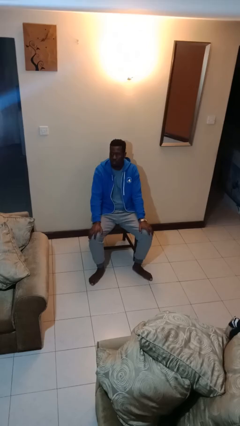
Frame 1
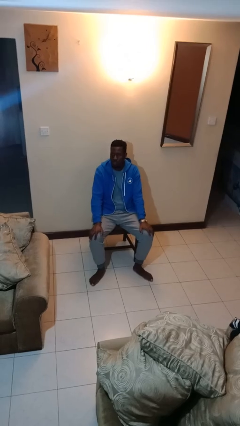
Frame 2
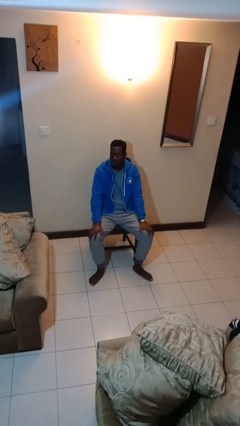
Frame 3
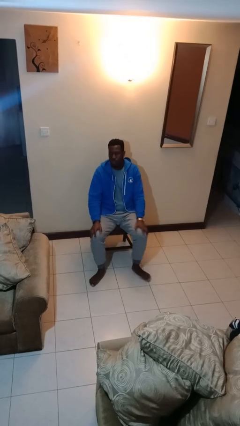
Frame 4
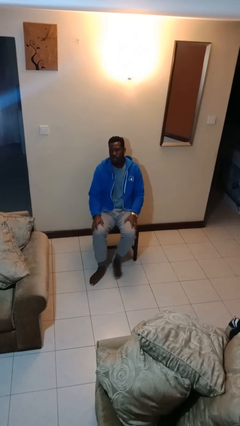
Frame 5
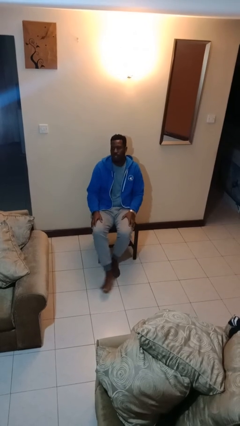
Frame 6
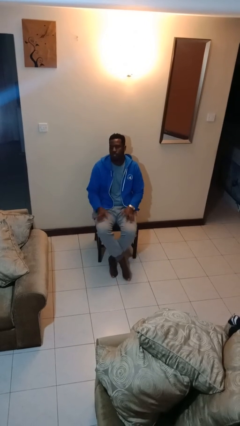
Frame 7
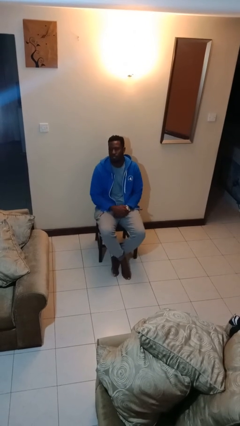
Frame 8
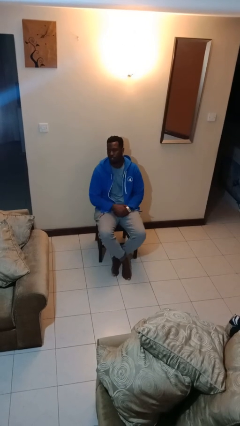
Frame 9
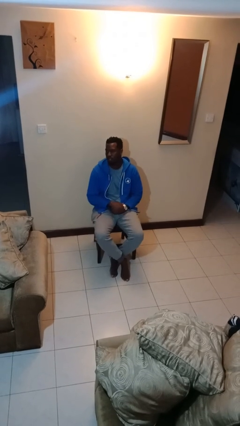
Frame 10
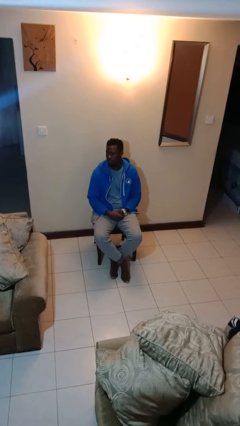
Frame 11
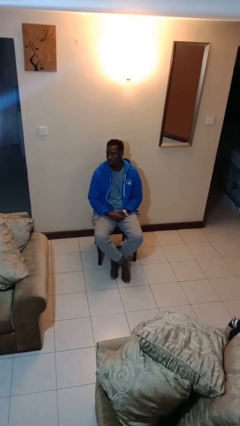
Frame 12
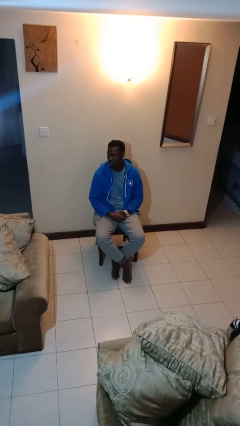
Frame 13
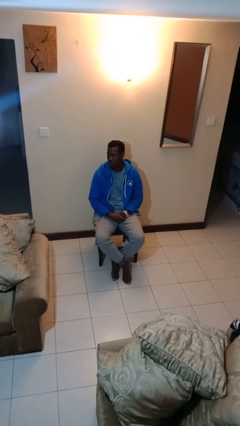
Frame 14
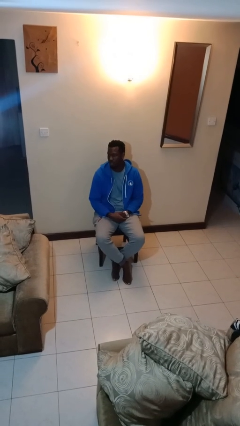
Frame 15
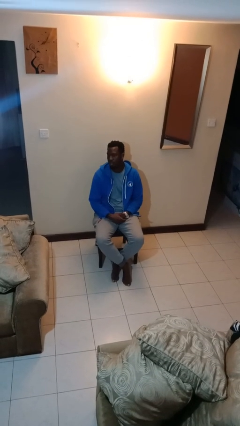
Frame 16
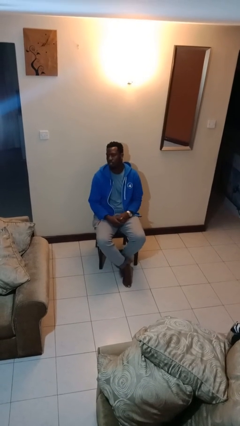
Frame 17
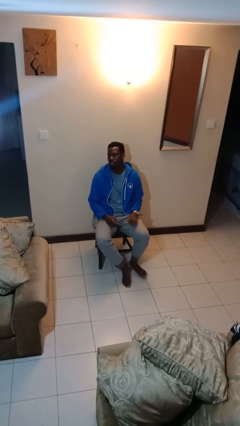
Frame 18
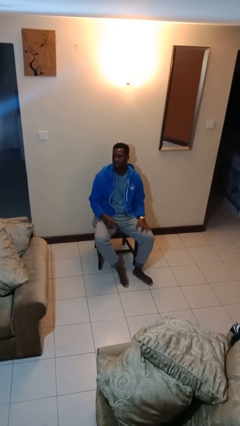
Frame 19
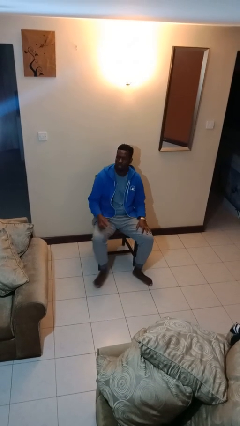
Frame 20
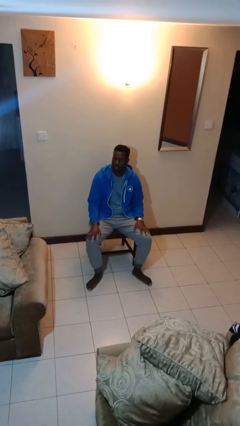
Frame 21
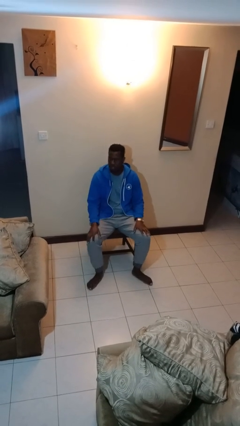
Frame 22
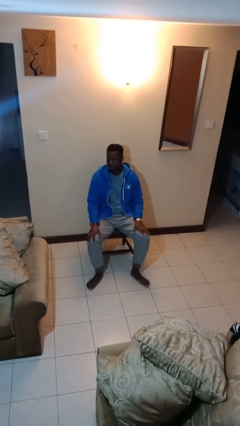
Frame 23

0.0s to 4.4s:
person crosses legs

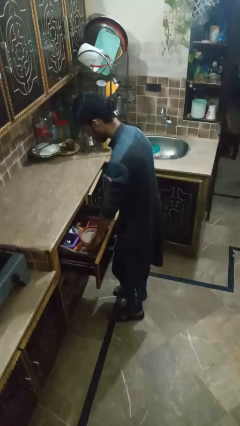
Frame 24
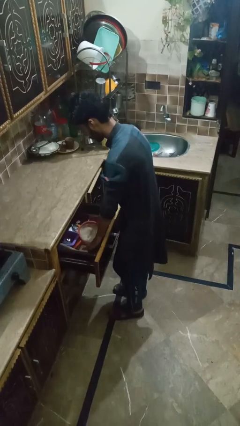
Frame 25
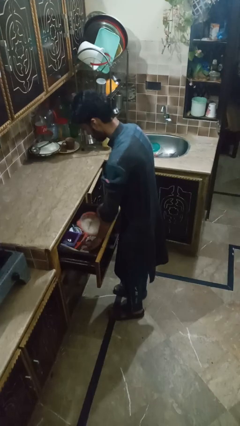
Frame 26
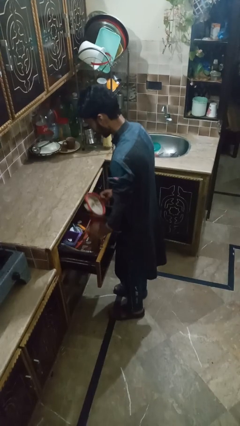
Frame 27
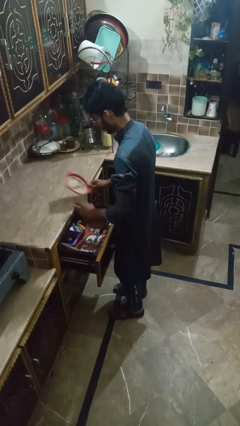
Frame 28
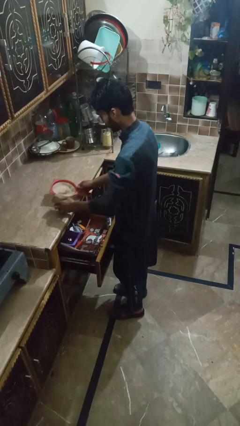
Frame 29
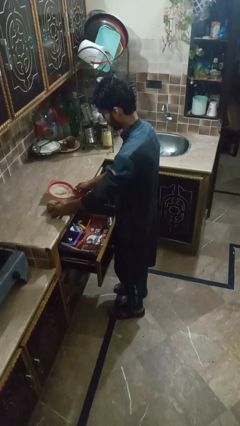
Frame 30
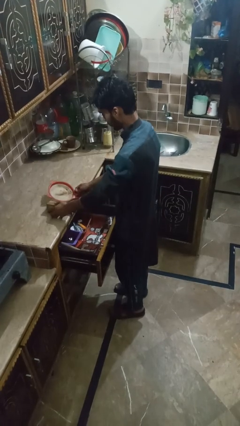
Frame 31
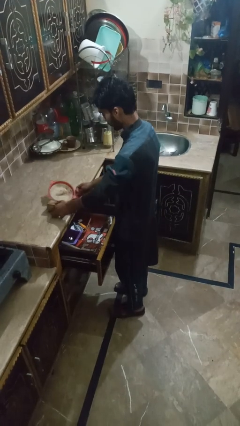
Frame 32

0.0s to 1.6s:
person takes object from kitchen drawer

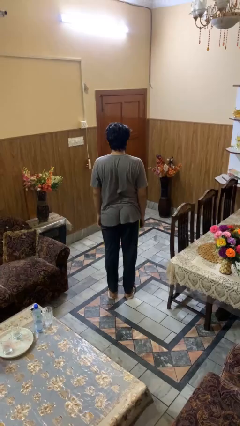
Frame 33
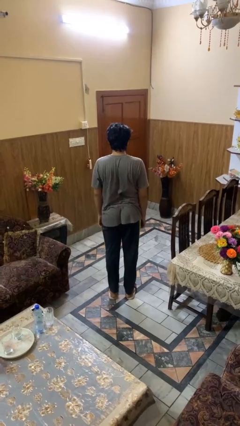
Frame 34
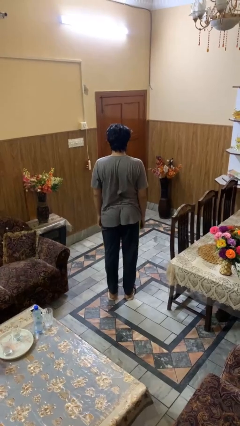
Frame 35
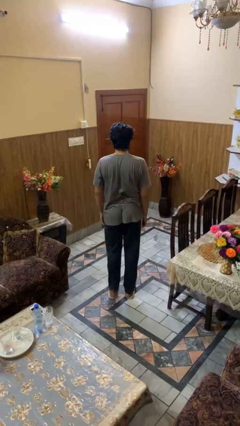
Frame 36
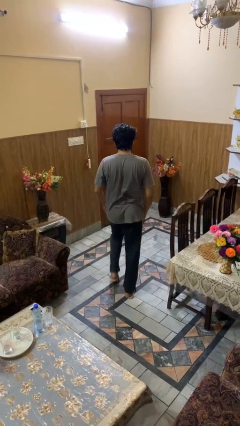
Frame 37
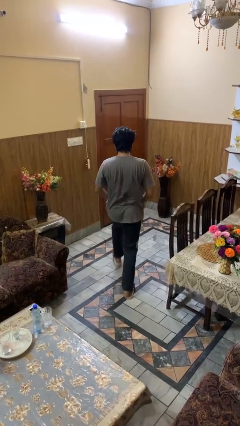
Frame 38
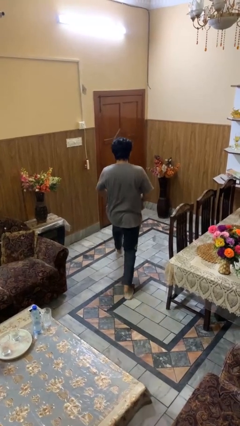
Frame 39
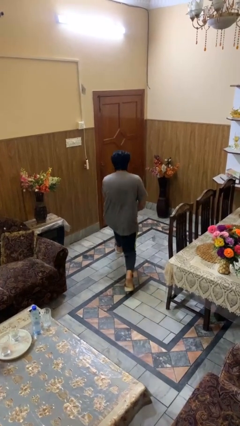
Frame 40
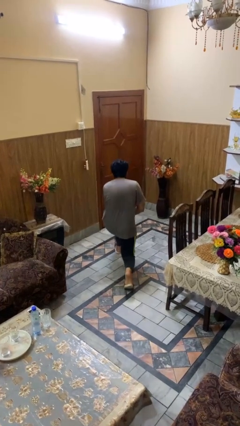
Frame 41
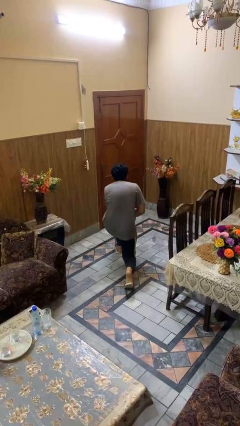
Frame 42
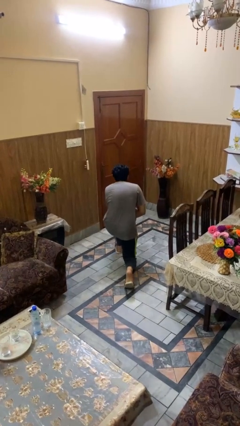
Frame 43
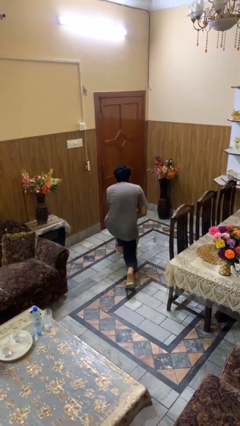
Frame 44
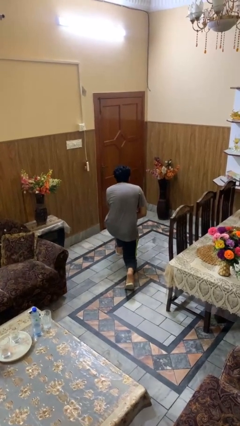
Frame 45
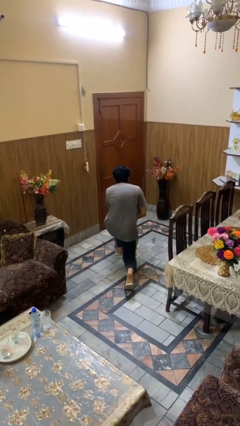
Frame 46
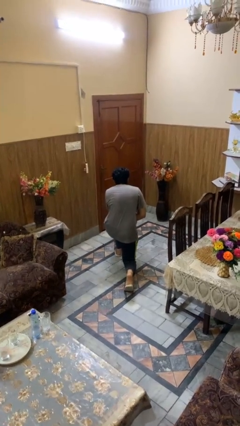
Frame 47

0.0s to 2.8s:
person kneels

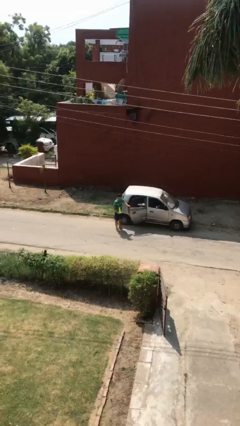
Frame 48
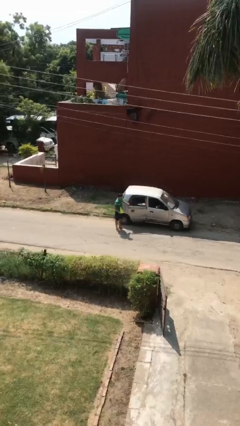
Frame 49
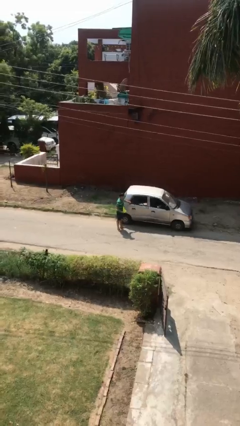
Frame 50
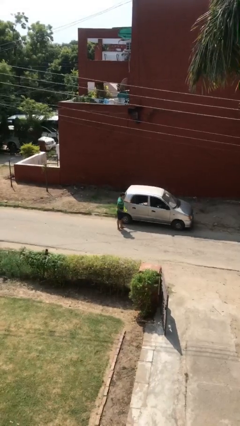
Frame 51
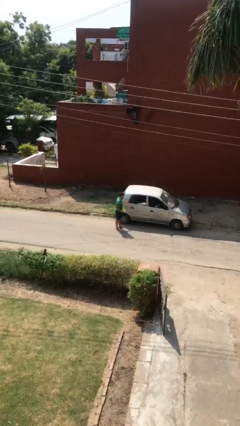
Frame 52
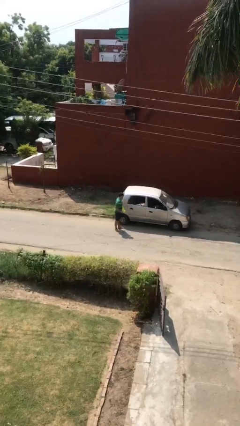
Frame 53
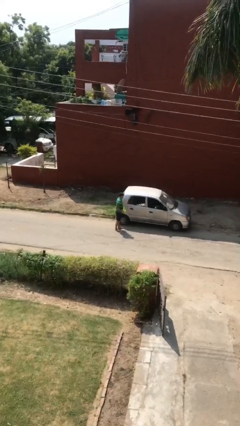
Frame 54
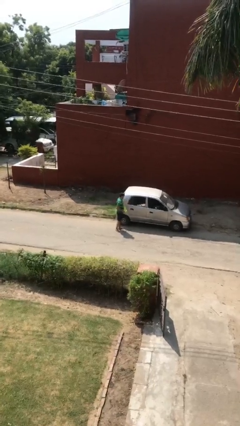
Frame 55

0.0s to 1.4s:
person closes car door

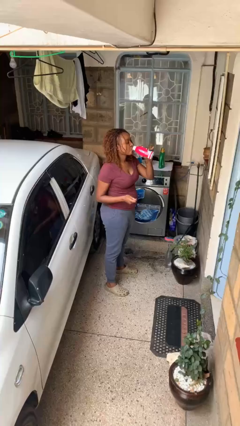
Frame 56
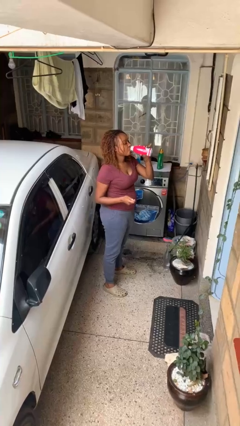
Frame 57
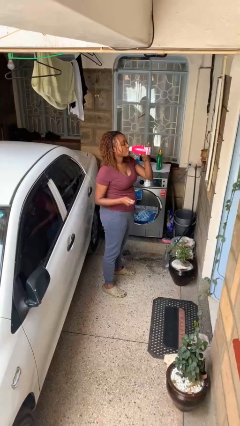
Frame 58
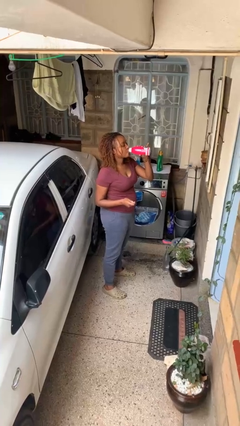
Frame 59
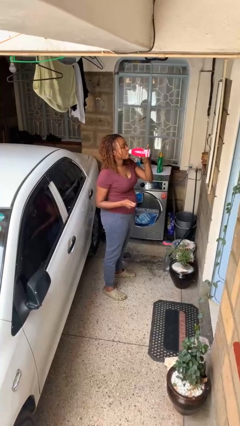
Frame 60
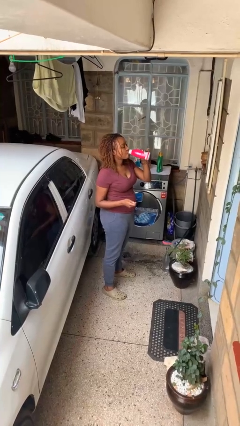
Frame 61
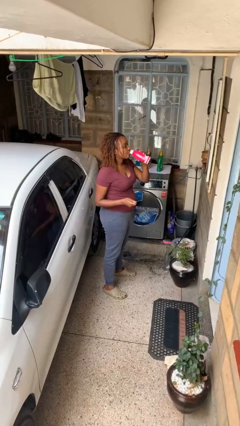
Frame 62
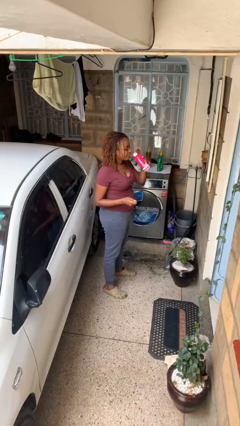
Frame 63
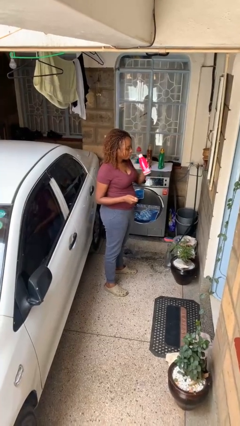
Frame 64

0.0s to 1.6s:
person drinks from beverage can

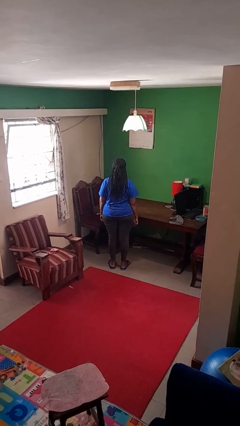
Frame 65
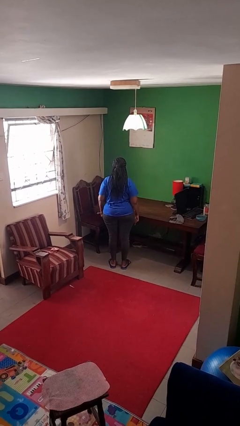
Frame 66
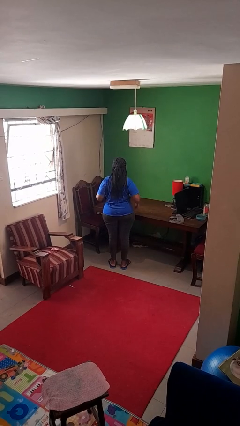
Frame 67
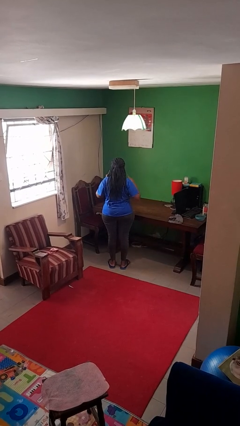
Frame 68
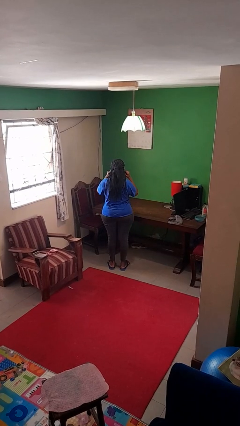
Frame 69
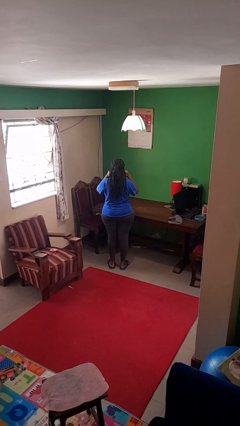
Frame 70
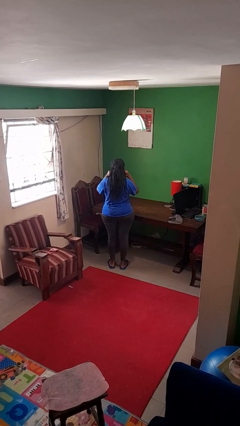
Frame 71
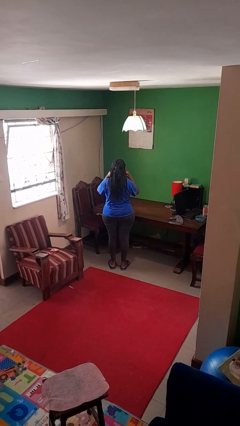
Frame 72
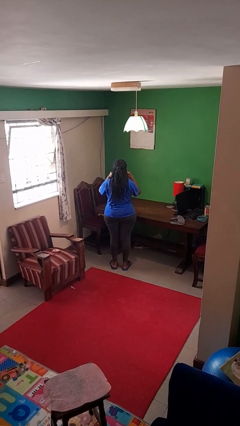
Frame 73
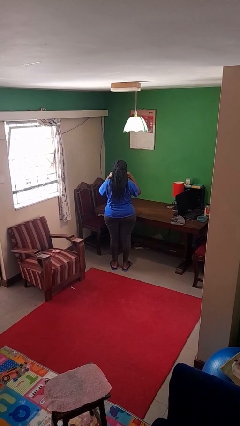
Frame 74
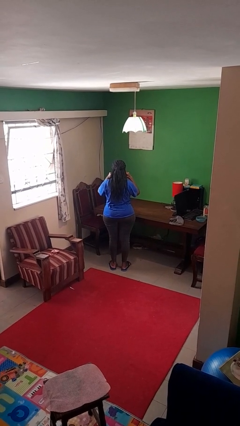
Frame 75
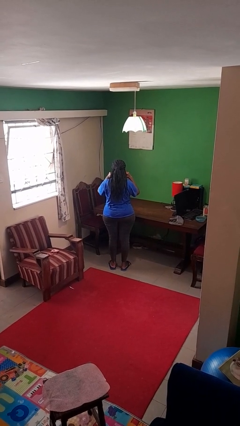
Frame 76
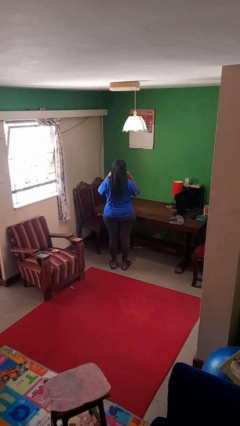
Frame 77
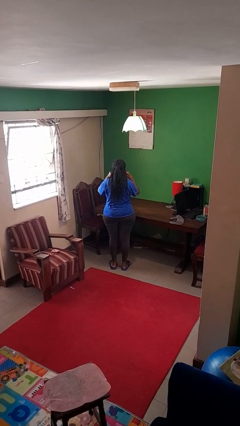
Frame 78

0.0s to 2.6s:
person puts fingers in ear

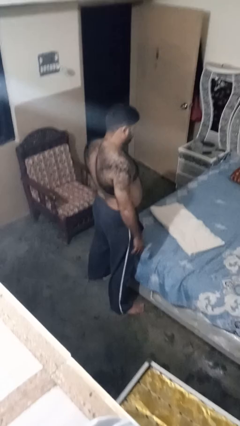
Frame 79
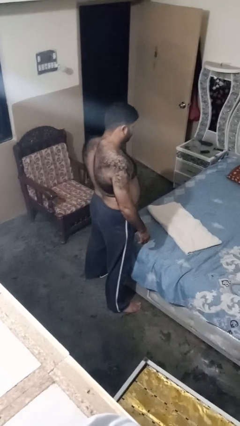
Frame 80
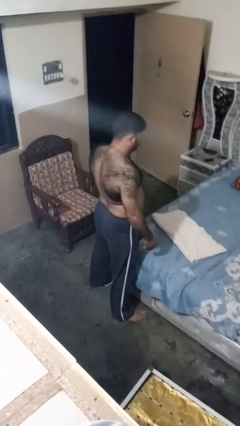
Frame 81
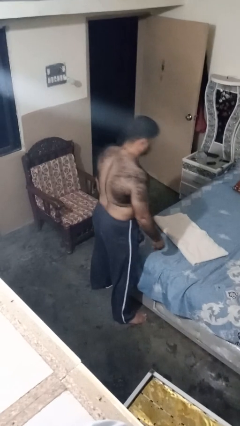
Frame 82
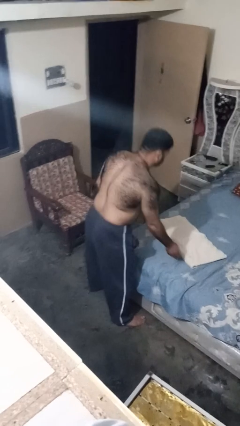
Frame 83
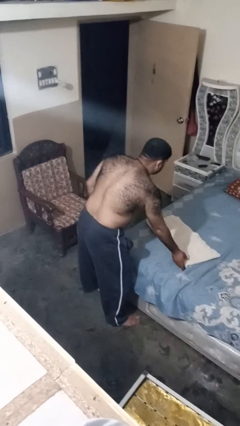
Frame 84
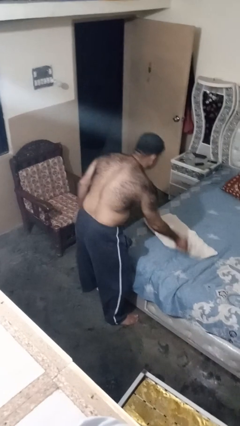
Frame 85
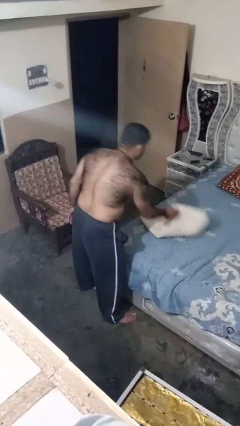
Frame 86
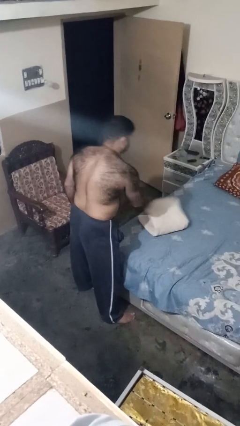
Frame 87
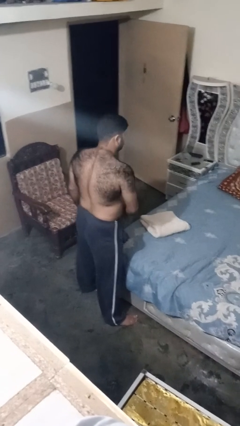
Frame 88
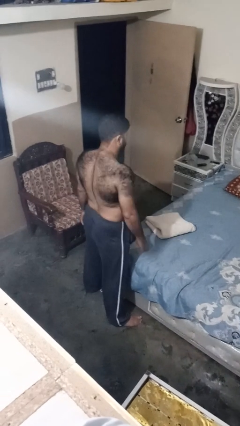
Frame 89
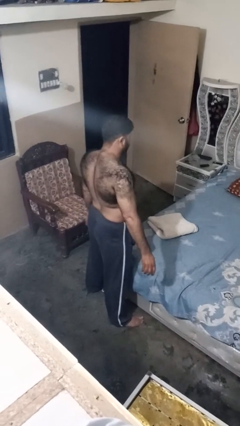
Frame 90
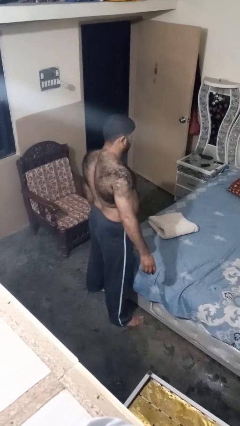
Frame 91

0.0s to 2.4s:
person folds towel
